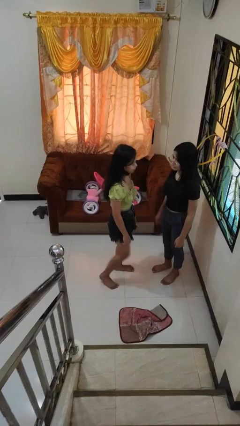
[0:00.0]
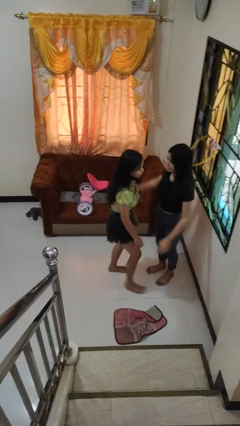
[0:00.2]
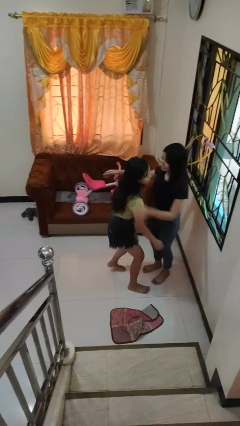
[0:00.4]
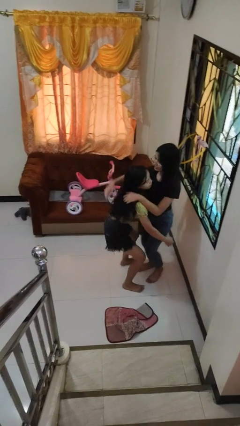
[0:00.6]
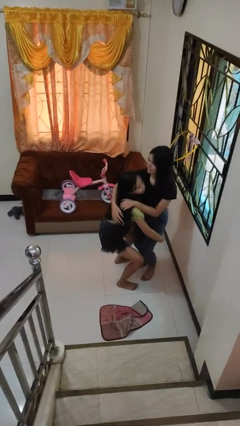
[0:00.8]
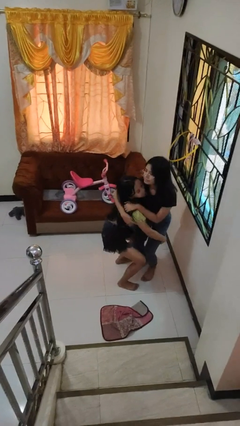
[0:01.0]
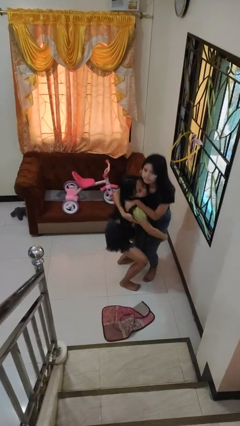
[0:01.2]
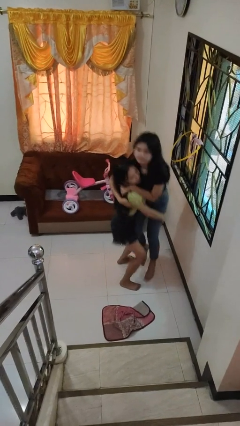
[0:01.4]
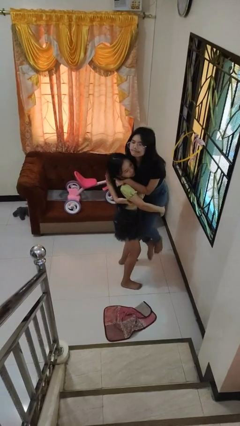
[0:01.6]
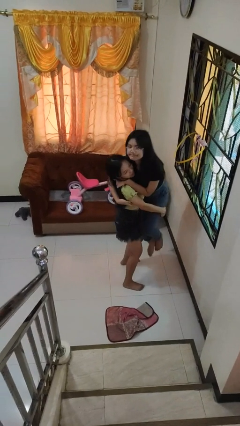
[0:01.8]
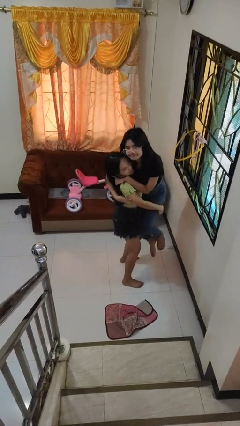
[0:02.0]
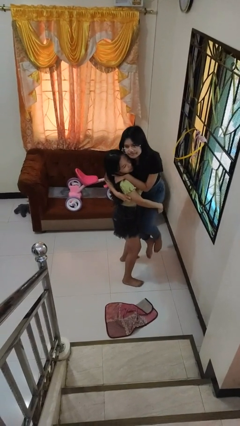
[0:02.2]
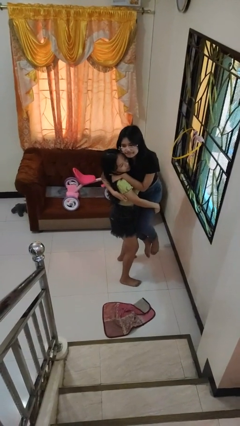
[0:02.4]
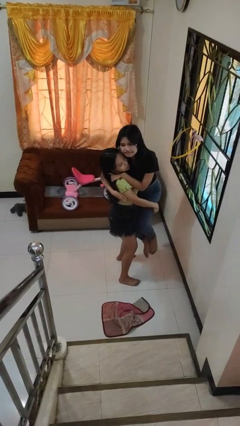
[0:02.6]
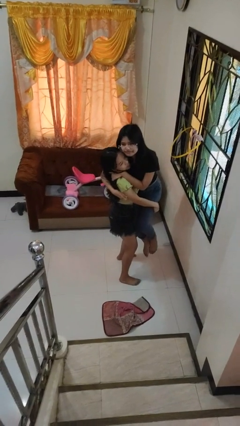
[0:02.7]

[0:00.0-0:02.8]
person picks up person

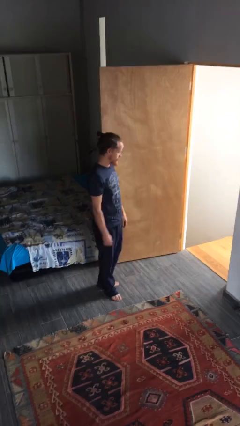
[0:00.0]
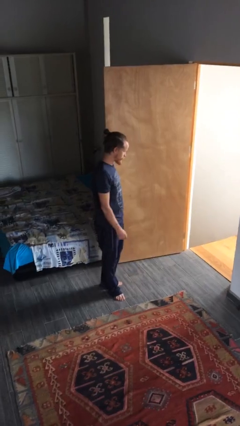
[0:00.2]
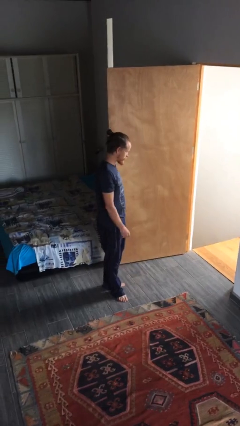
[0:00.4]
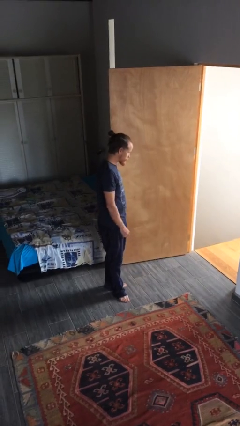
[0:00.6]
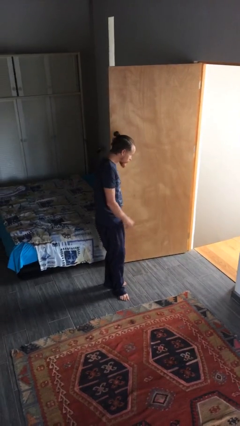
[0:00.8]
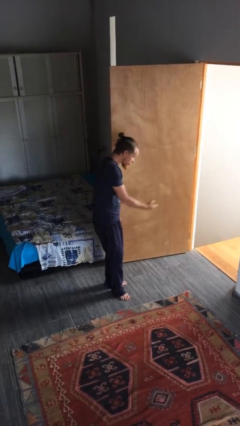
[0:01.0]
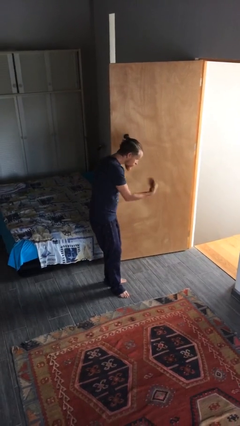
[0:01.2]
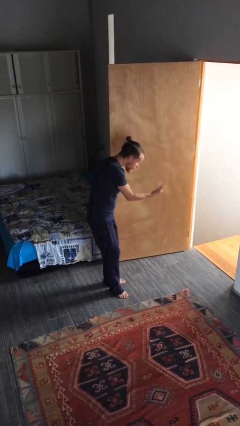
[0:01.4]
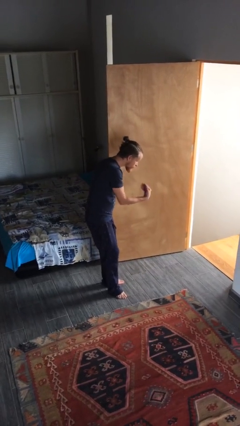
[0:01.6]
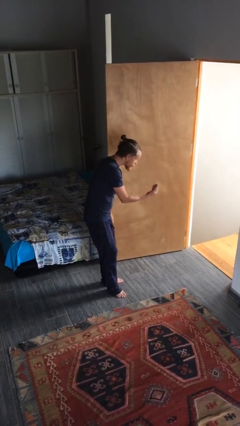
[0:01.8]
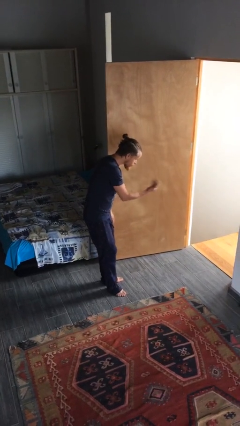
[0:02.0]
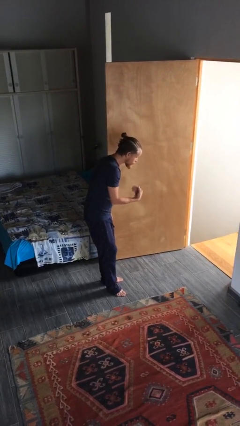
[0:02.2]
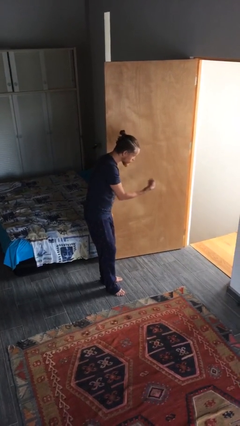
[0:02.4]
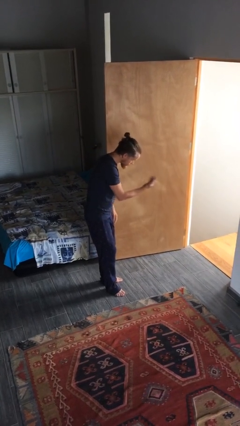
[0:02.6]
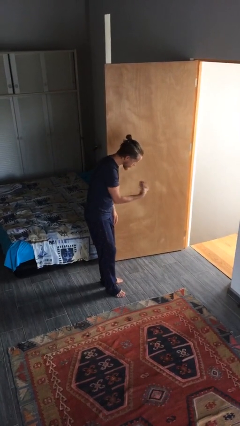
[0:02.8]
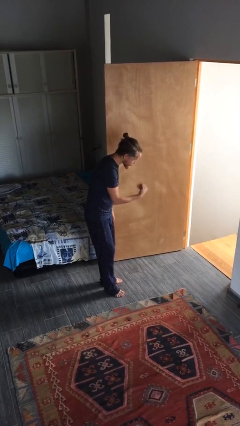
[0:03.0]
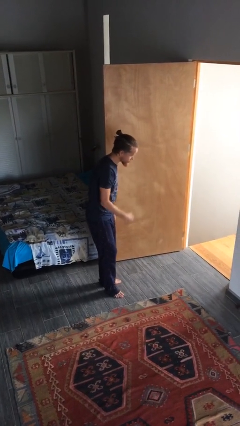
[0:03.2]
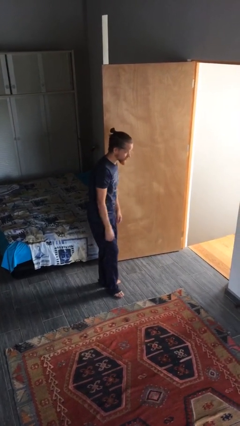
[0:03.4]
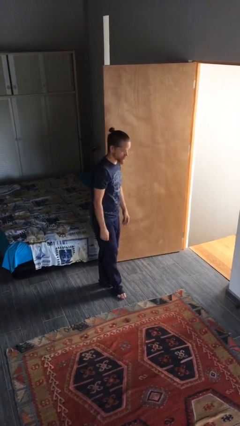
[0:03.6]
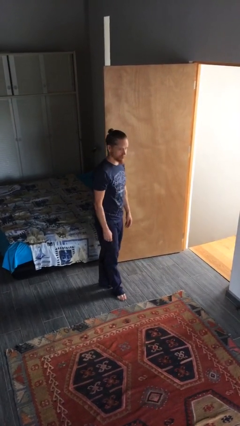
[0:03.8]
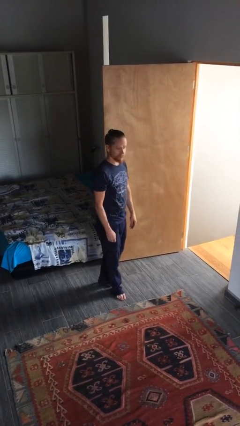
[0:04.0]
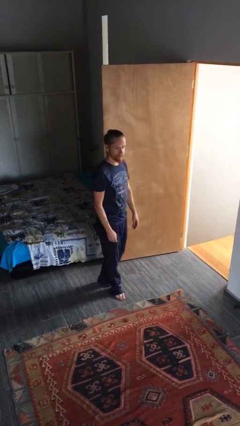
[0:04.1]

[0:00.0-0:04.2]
person gestures come here

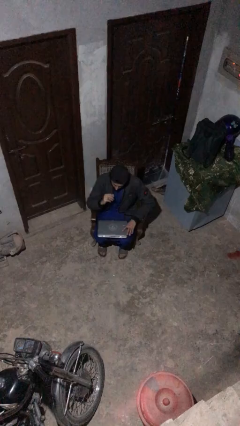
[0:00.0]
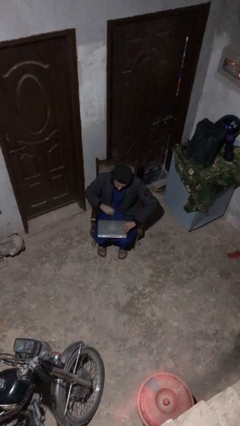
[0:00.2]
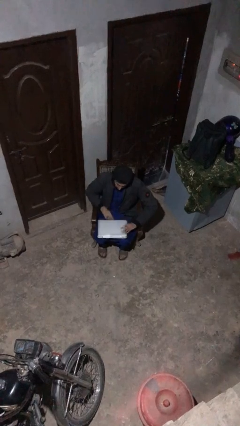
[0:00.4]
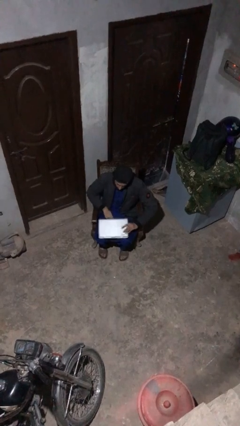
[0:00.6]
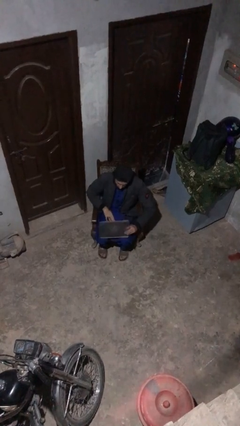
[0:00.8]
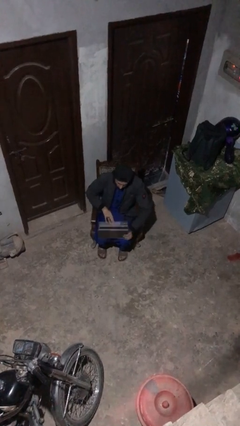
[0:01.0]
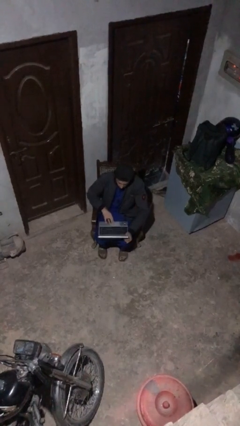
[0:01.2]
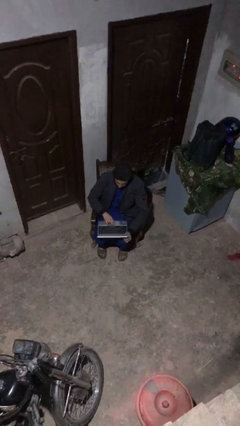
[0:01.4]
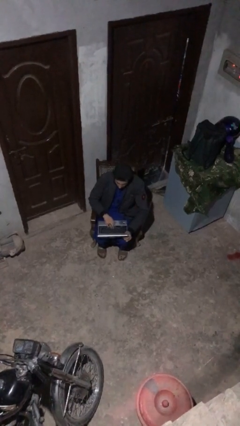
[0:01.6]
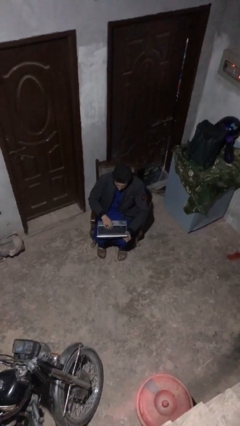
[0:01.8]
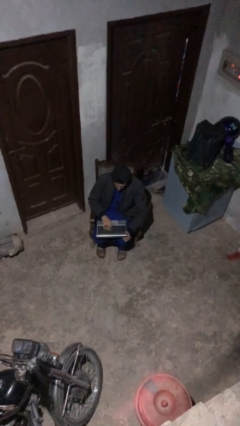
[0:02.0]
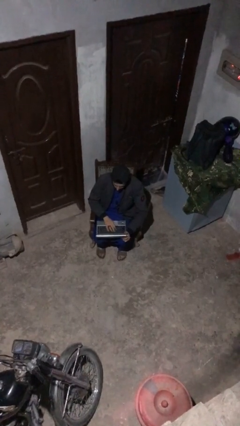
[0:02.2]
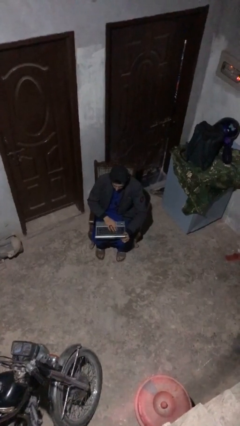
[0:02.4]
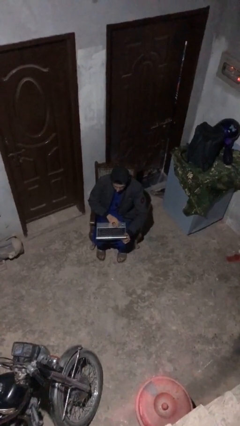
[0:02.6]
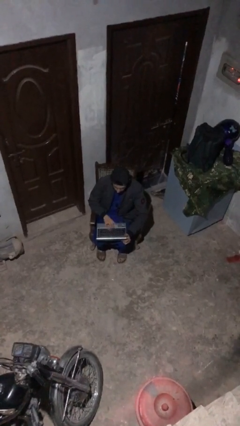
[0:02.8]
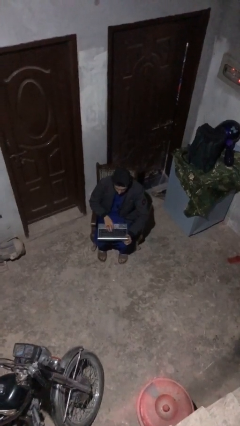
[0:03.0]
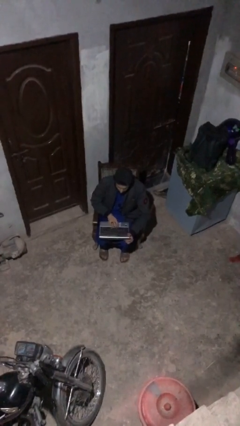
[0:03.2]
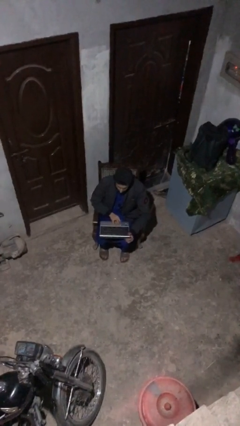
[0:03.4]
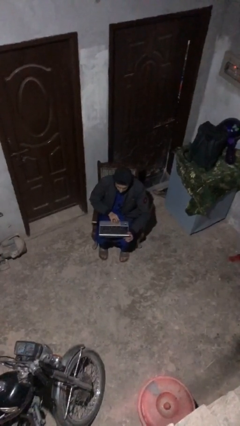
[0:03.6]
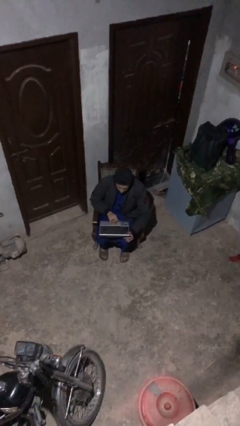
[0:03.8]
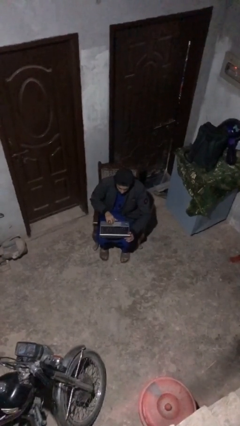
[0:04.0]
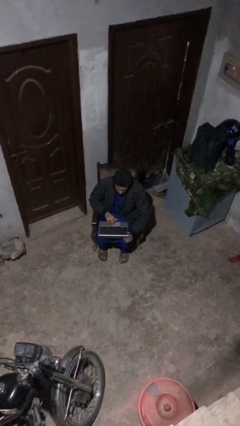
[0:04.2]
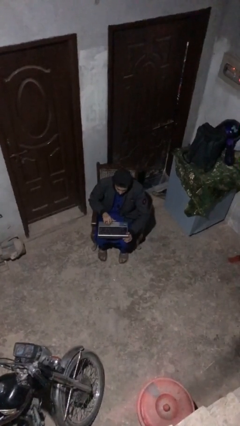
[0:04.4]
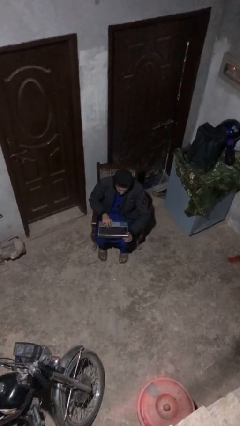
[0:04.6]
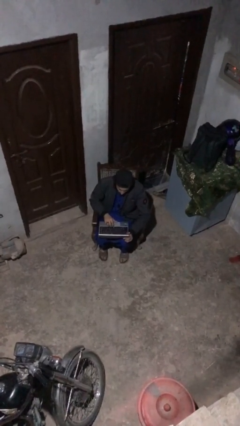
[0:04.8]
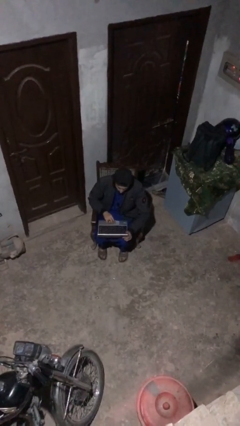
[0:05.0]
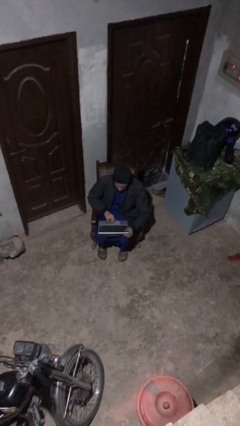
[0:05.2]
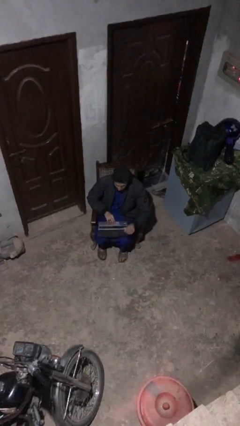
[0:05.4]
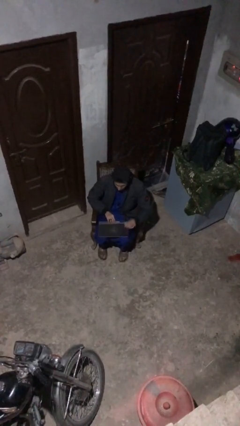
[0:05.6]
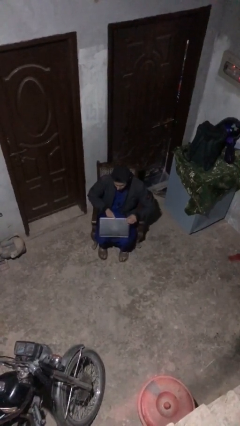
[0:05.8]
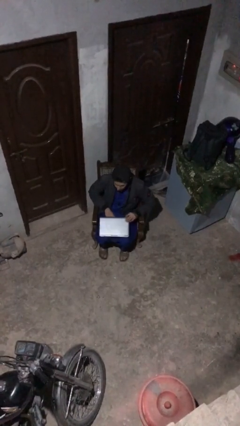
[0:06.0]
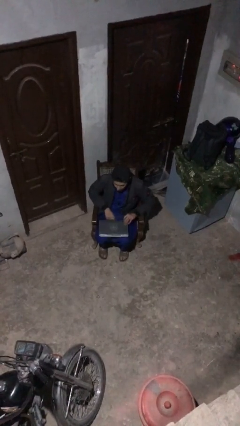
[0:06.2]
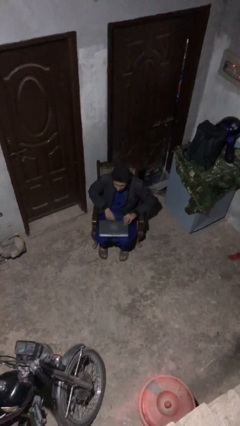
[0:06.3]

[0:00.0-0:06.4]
person interacts with laptop

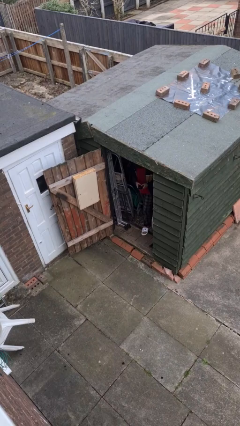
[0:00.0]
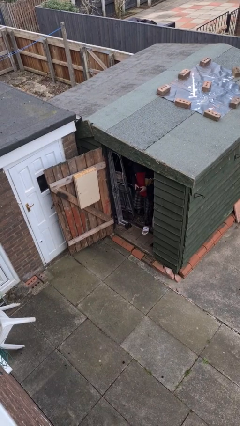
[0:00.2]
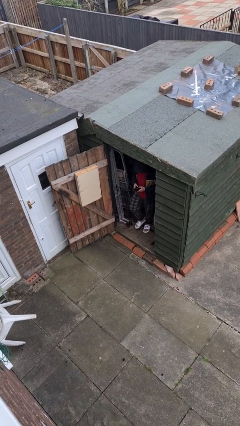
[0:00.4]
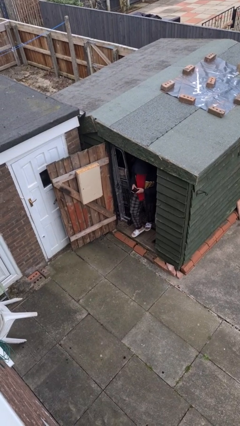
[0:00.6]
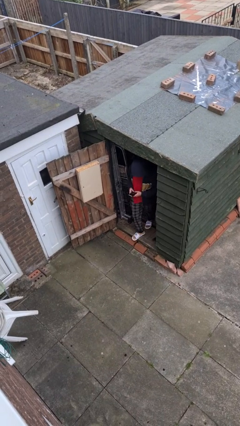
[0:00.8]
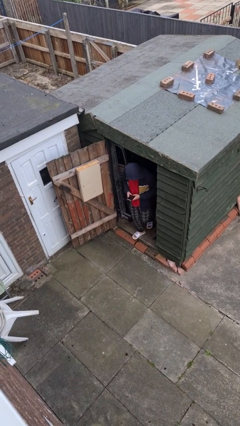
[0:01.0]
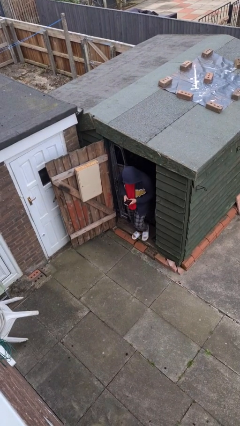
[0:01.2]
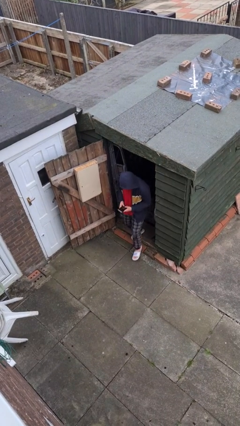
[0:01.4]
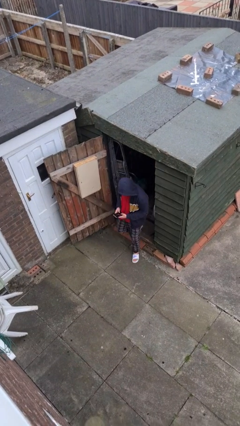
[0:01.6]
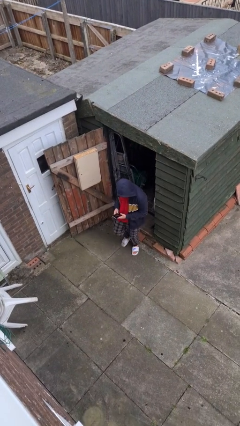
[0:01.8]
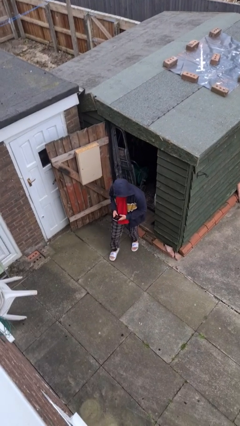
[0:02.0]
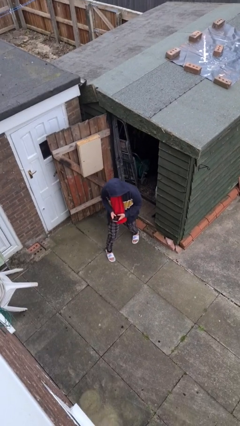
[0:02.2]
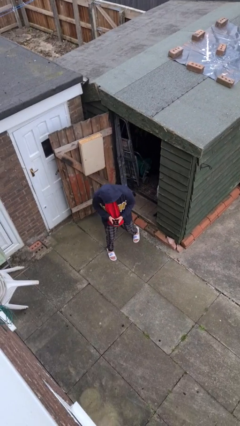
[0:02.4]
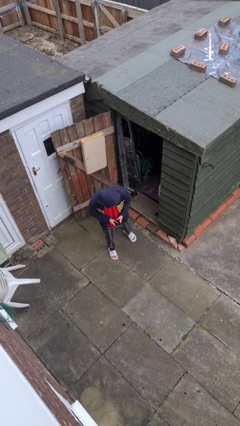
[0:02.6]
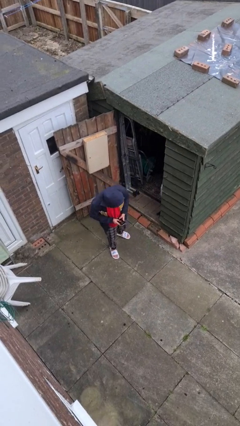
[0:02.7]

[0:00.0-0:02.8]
person enters scene through structure

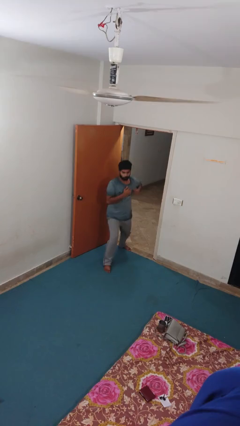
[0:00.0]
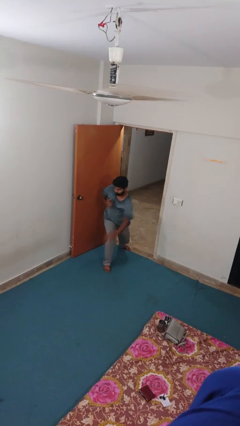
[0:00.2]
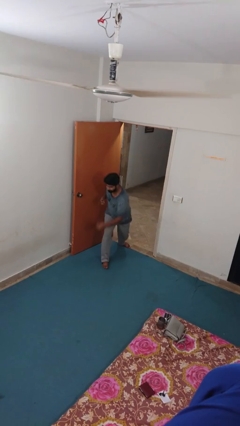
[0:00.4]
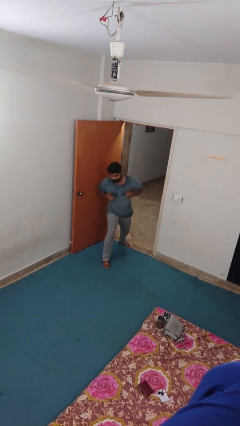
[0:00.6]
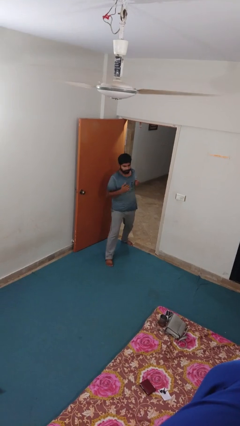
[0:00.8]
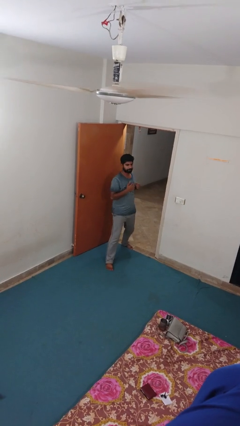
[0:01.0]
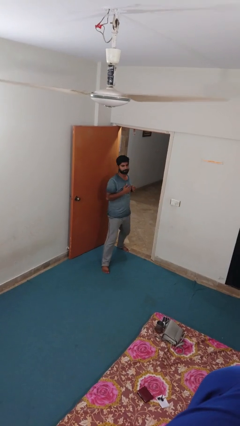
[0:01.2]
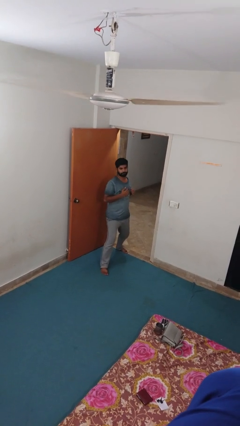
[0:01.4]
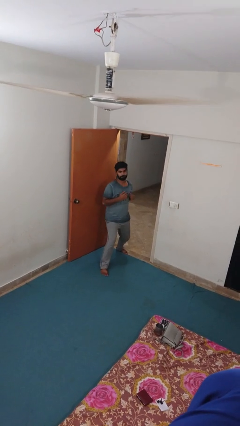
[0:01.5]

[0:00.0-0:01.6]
person karate chop
